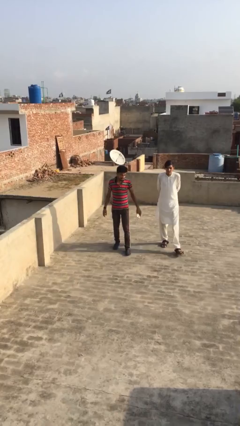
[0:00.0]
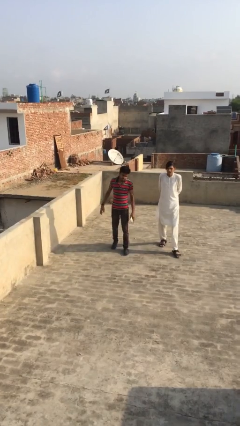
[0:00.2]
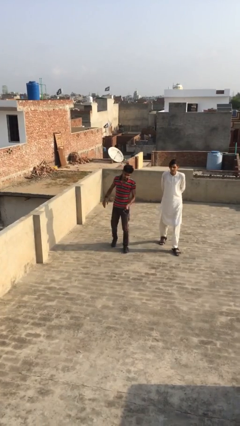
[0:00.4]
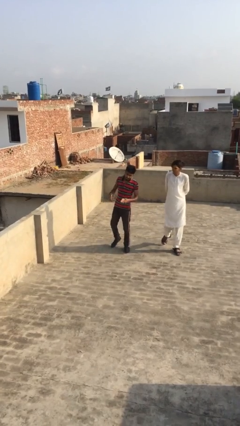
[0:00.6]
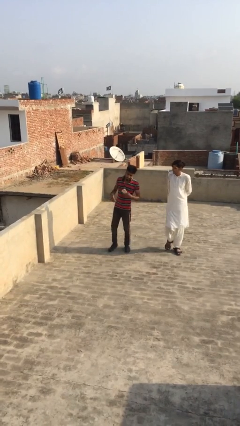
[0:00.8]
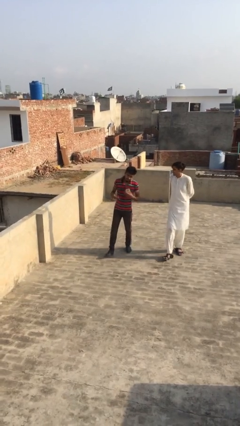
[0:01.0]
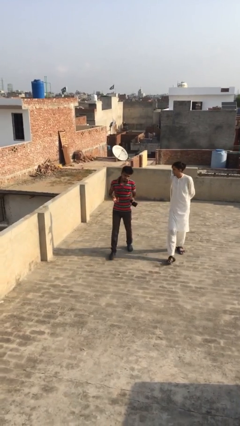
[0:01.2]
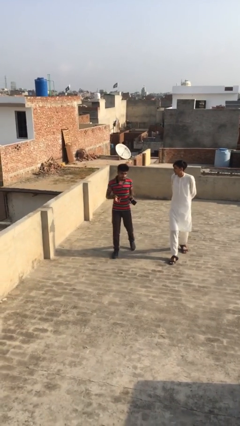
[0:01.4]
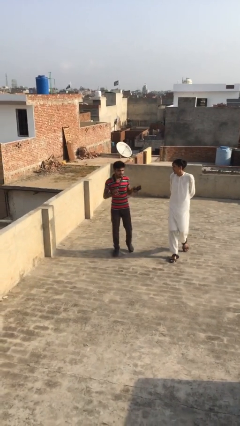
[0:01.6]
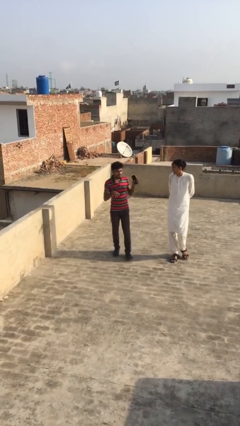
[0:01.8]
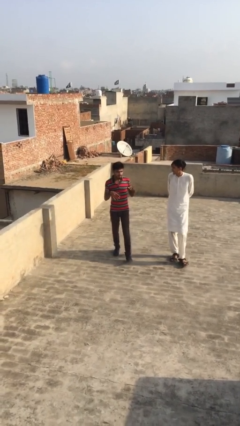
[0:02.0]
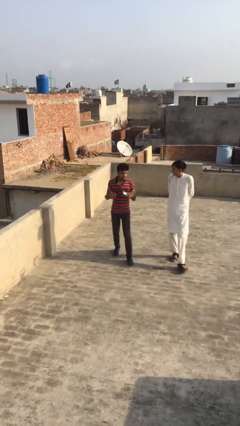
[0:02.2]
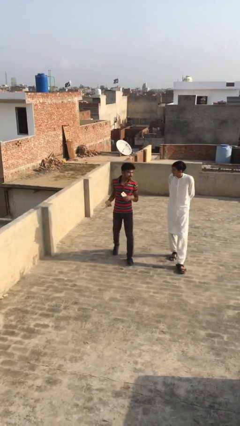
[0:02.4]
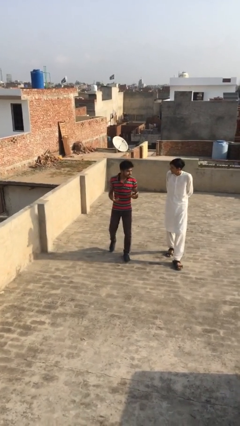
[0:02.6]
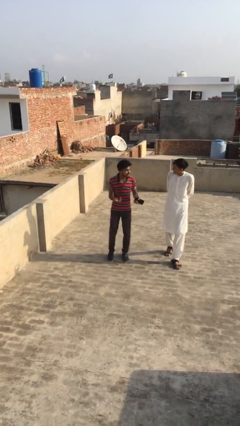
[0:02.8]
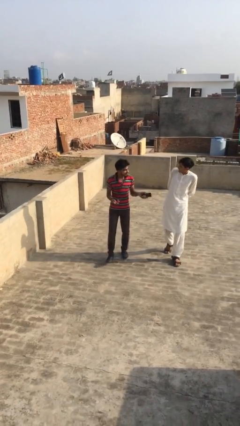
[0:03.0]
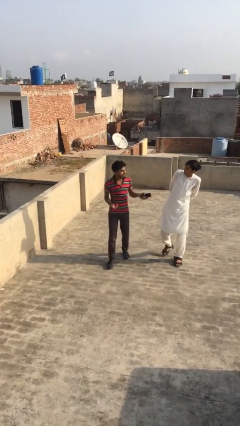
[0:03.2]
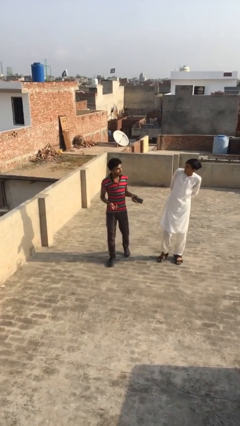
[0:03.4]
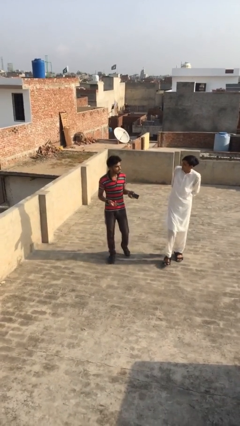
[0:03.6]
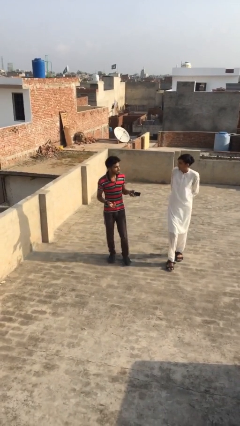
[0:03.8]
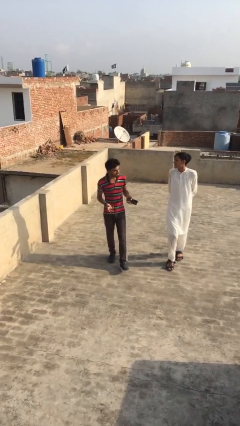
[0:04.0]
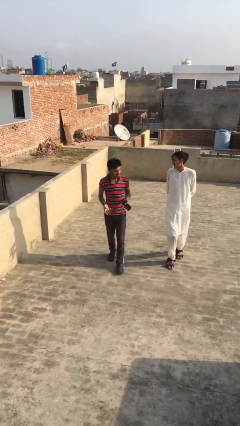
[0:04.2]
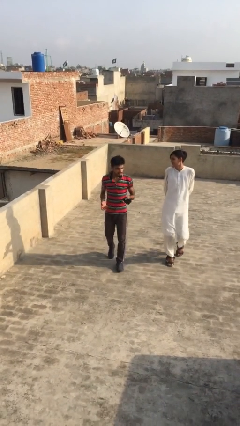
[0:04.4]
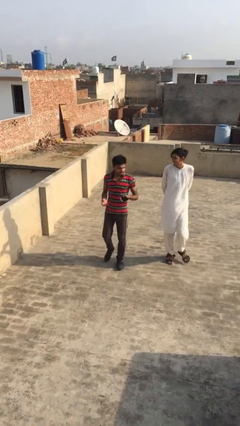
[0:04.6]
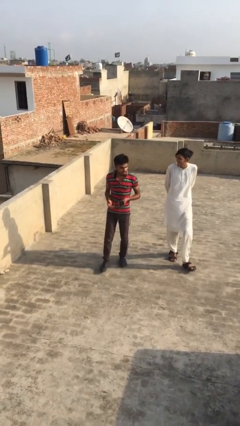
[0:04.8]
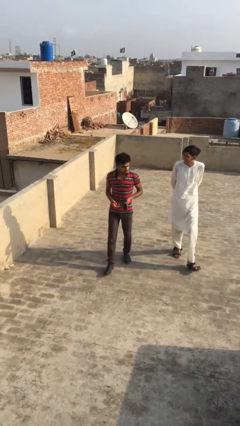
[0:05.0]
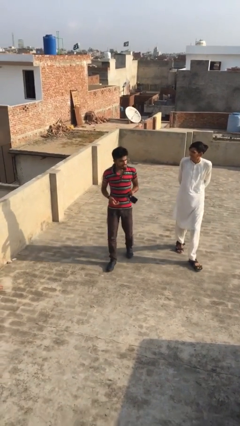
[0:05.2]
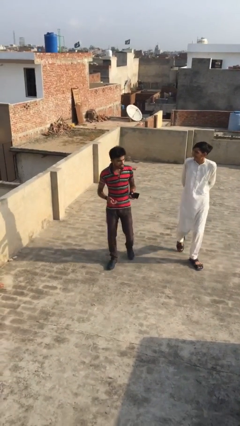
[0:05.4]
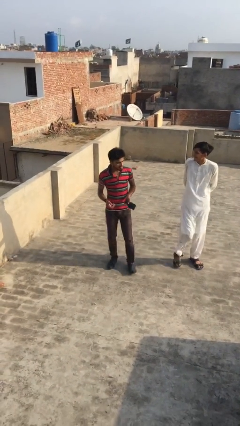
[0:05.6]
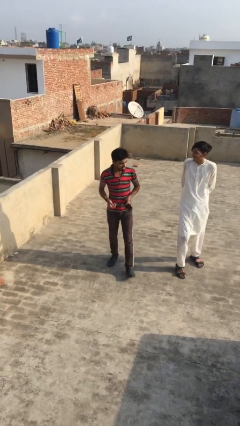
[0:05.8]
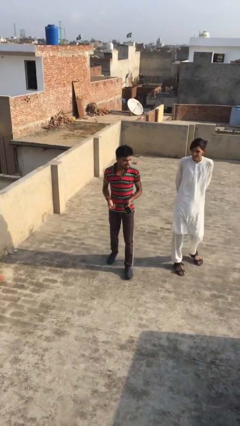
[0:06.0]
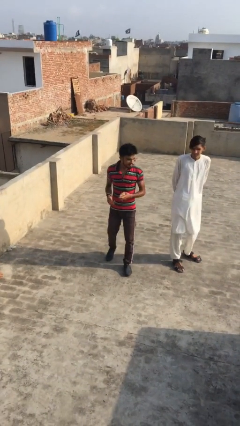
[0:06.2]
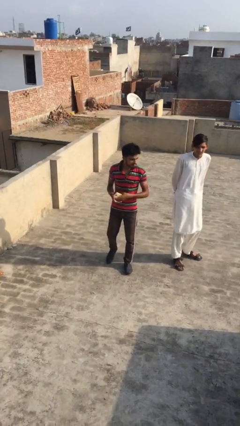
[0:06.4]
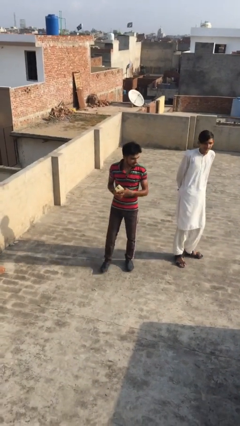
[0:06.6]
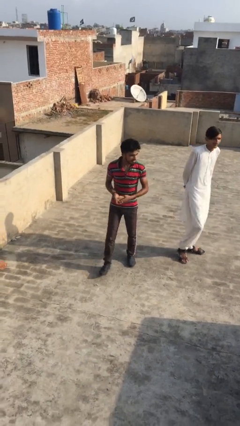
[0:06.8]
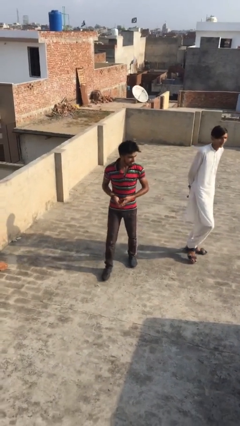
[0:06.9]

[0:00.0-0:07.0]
person talks to person

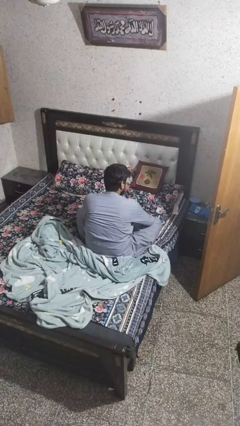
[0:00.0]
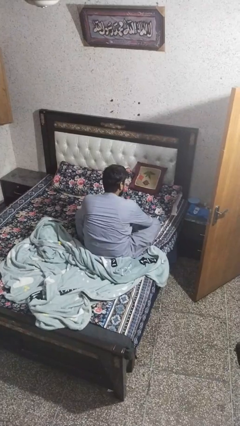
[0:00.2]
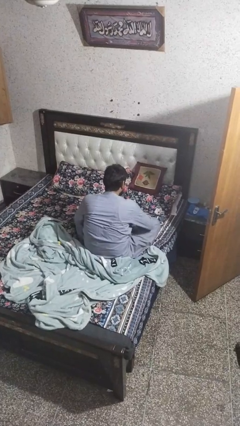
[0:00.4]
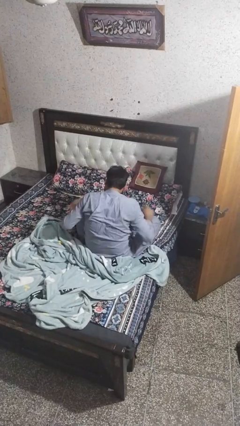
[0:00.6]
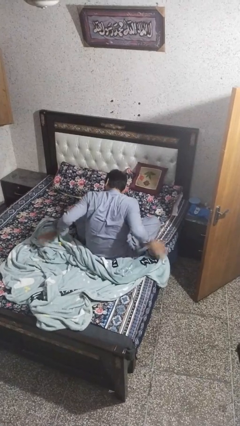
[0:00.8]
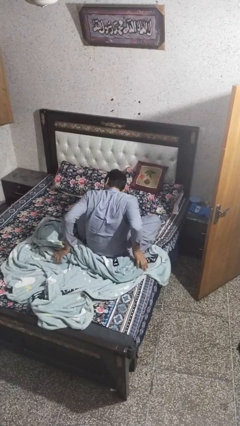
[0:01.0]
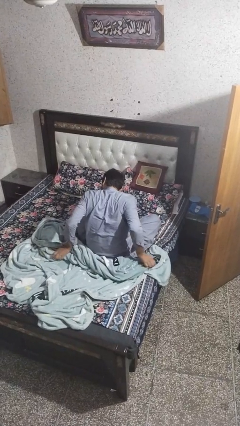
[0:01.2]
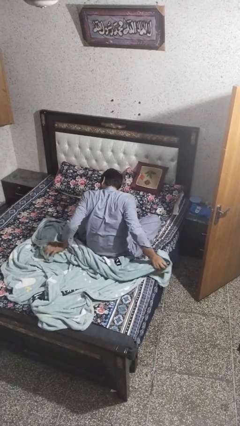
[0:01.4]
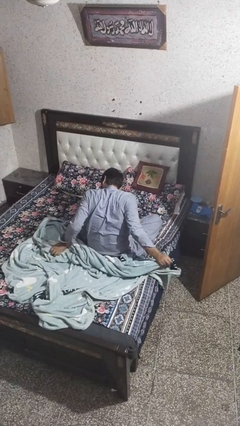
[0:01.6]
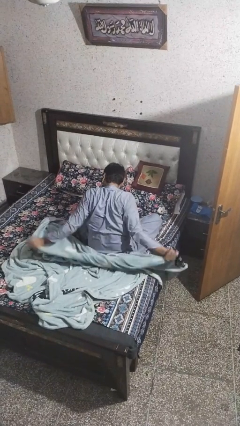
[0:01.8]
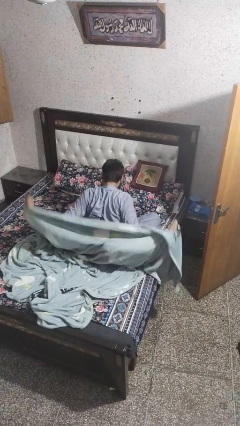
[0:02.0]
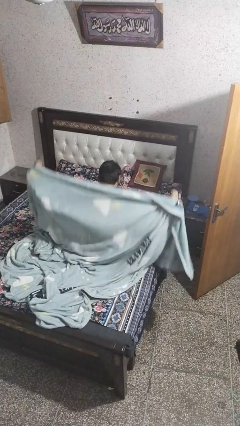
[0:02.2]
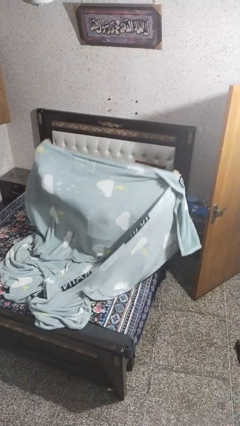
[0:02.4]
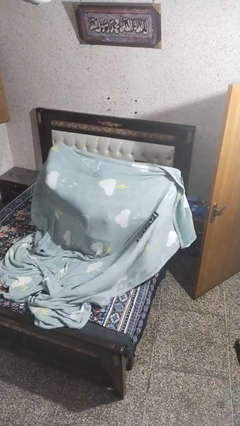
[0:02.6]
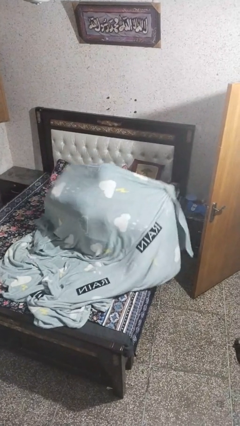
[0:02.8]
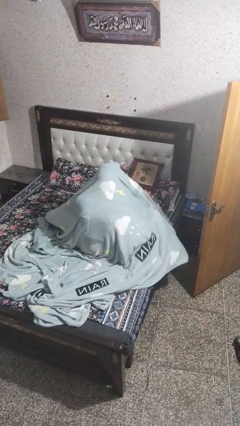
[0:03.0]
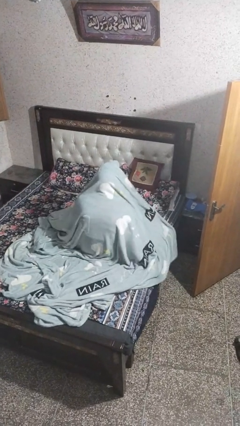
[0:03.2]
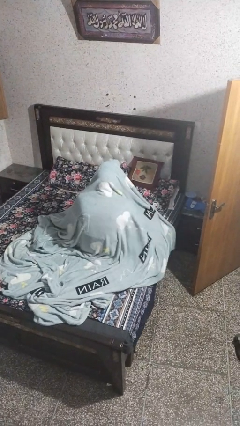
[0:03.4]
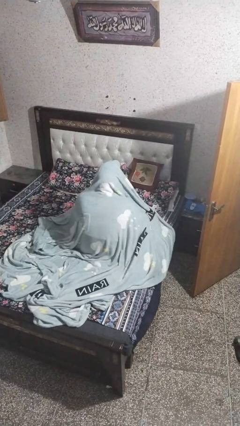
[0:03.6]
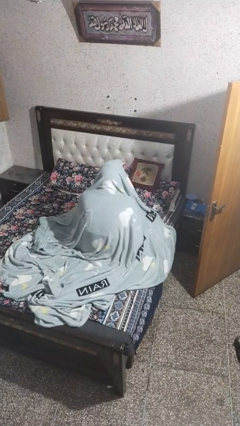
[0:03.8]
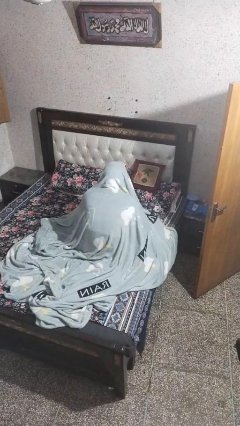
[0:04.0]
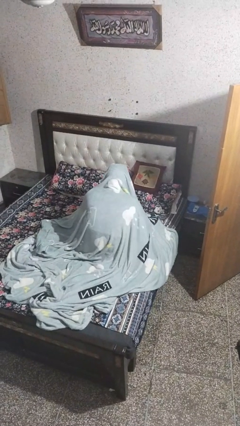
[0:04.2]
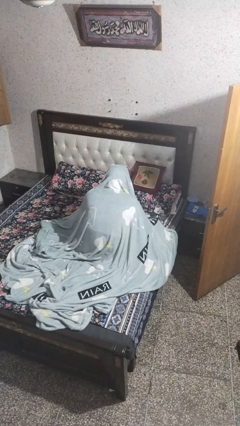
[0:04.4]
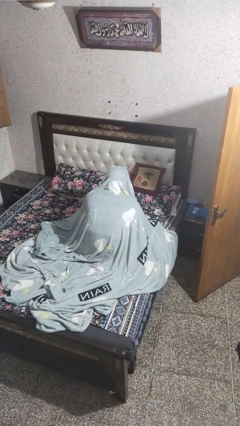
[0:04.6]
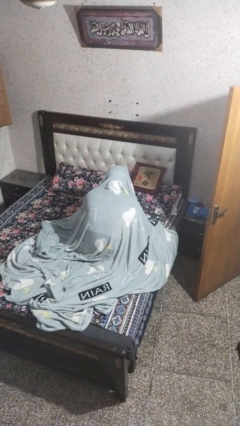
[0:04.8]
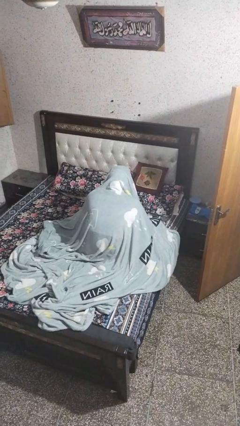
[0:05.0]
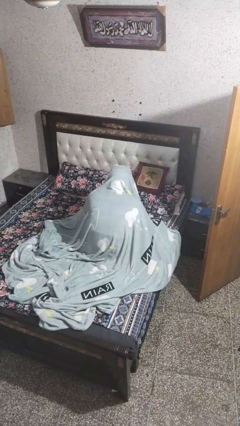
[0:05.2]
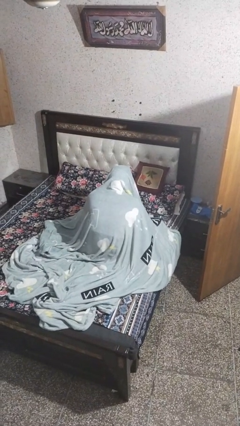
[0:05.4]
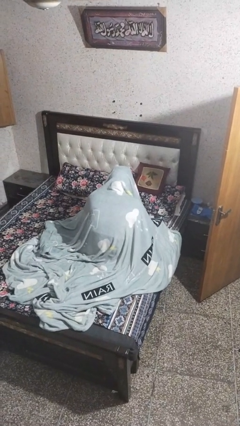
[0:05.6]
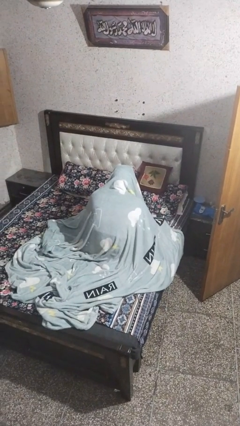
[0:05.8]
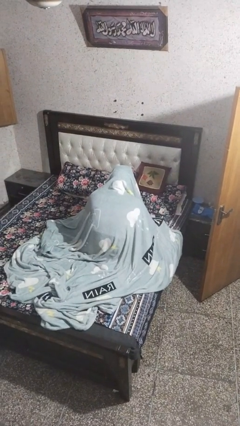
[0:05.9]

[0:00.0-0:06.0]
person covers with blanket

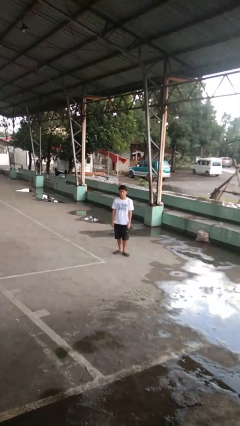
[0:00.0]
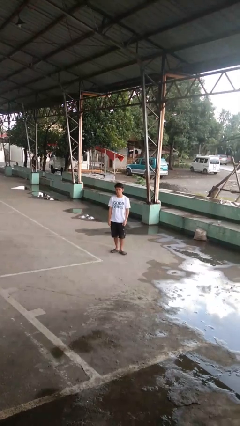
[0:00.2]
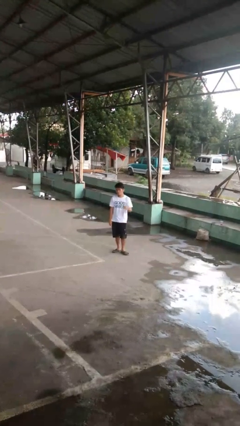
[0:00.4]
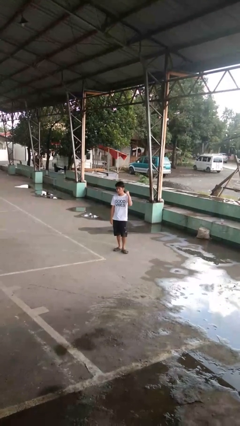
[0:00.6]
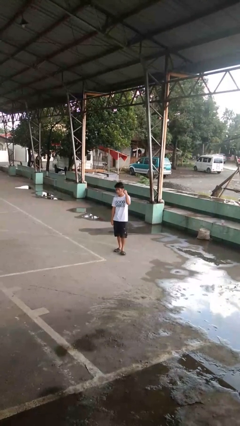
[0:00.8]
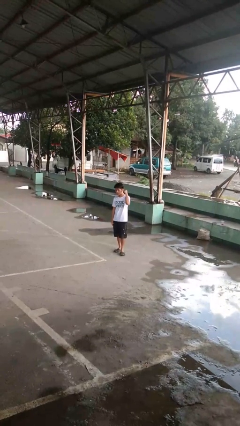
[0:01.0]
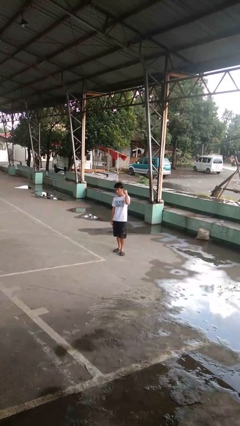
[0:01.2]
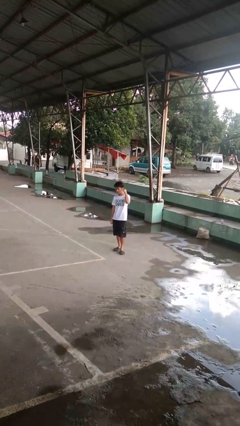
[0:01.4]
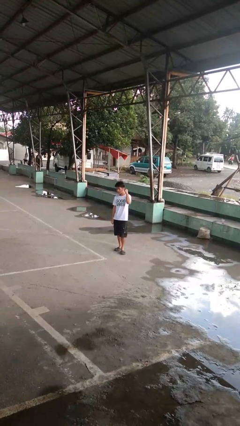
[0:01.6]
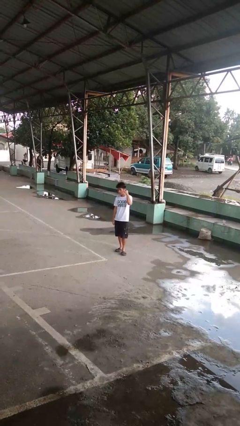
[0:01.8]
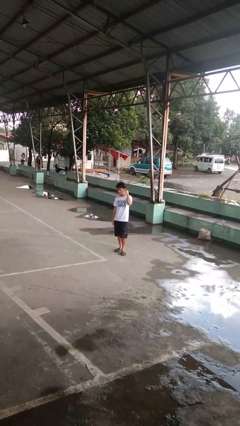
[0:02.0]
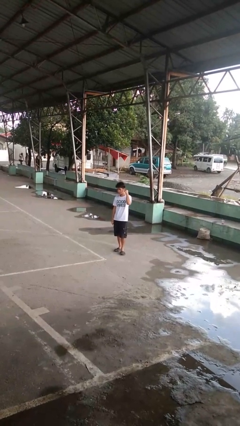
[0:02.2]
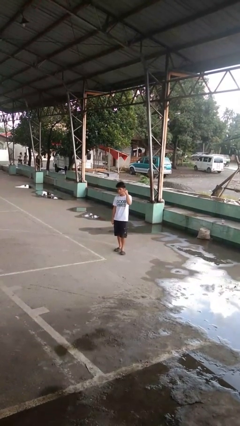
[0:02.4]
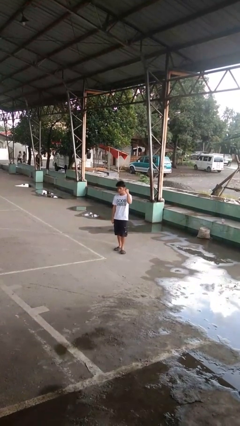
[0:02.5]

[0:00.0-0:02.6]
person gestures listen closely

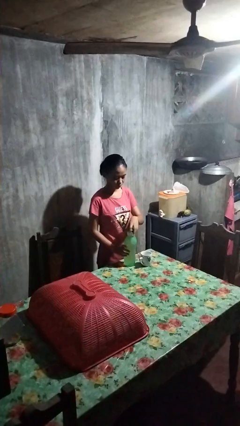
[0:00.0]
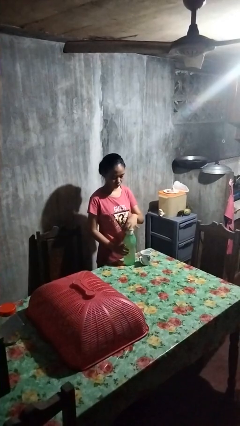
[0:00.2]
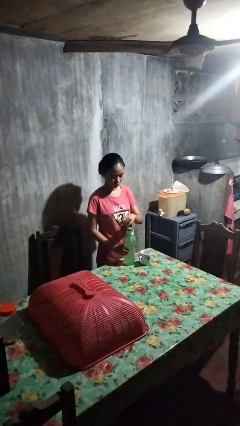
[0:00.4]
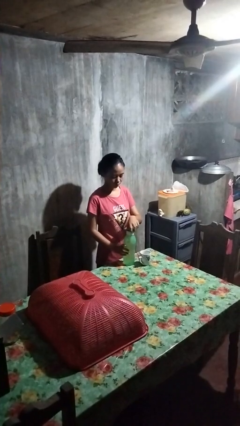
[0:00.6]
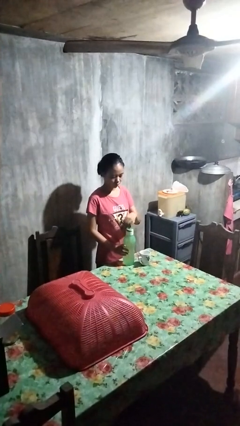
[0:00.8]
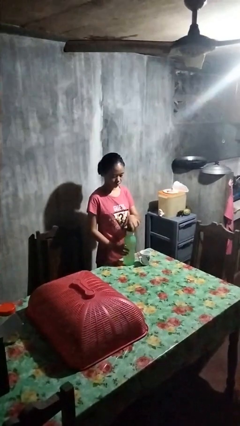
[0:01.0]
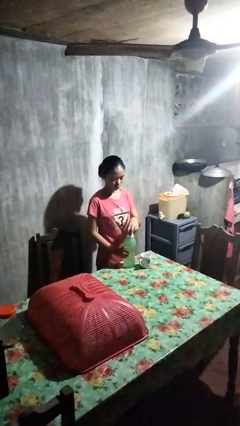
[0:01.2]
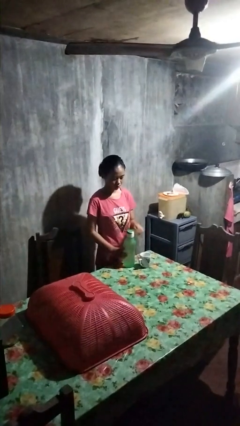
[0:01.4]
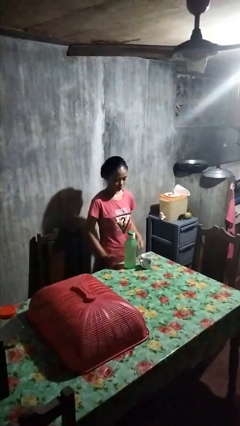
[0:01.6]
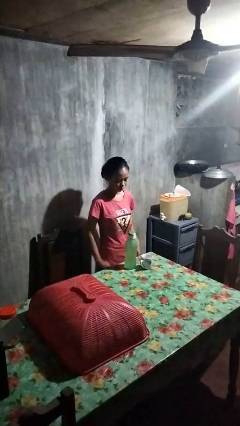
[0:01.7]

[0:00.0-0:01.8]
person screws lid to bottle

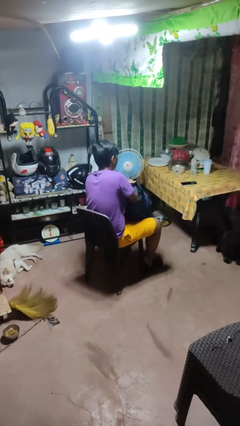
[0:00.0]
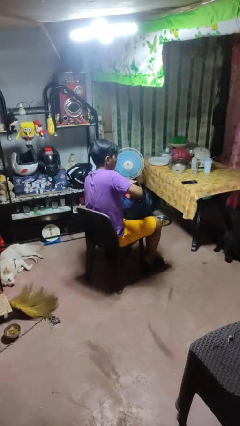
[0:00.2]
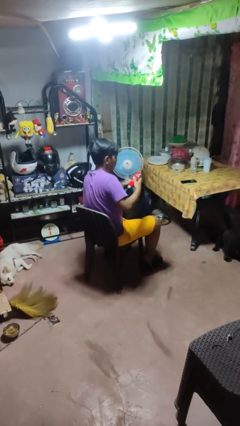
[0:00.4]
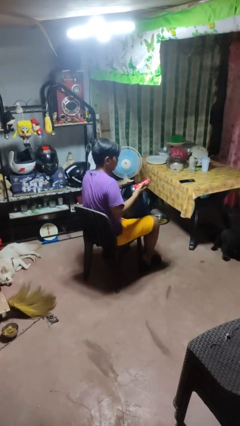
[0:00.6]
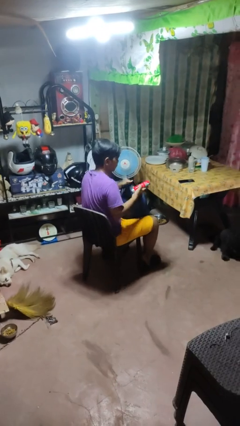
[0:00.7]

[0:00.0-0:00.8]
person takes object from backpack
